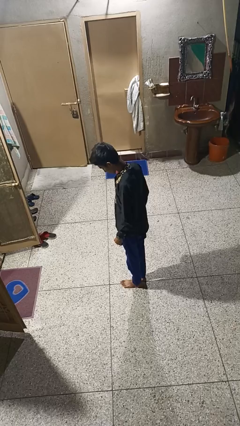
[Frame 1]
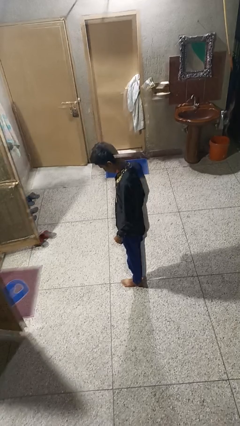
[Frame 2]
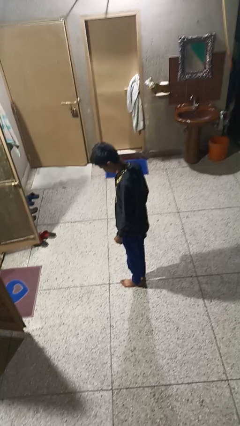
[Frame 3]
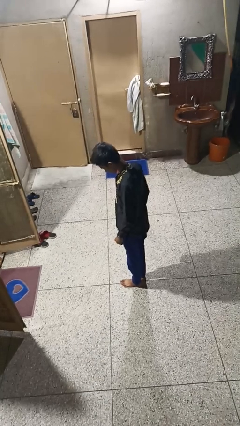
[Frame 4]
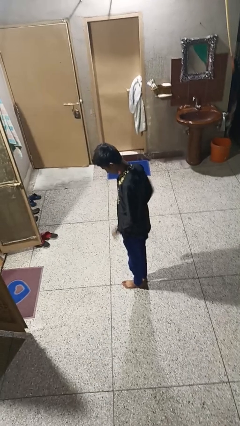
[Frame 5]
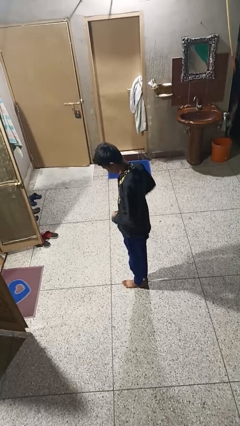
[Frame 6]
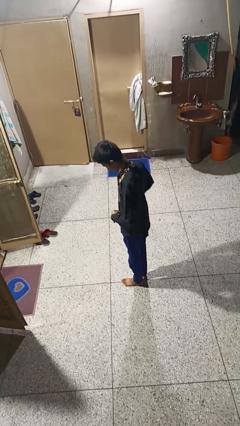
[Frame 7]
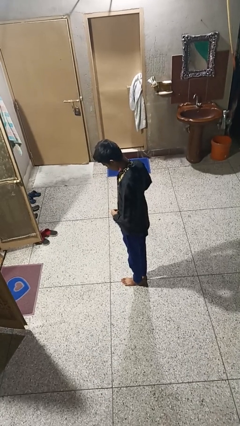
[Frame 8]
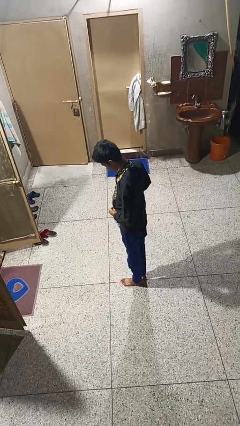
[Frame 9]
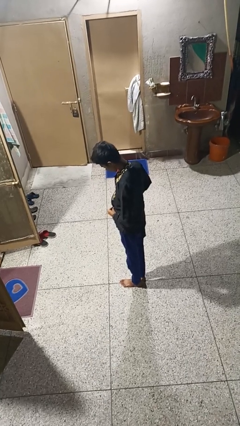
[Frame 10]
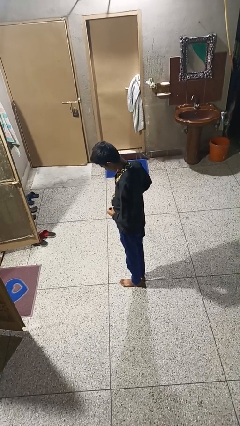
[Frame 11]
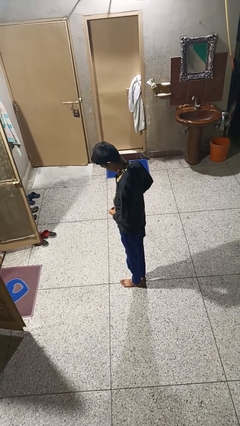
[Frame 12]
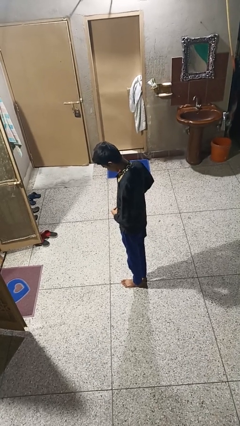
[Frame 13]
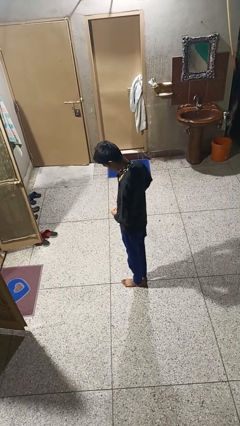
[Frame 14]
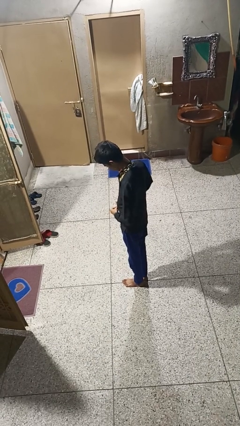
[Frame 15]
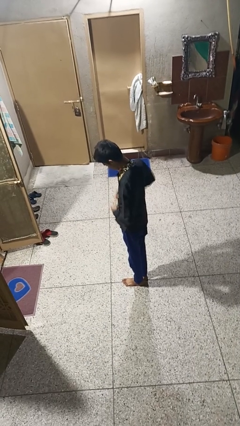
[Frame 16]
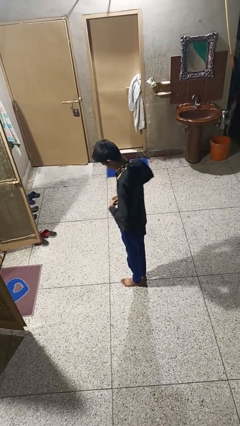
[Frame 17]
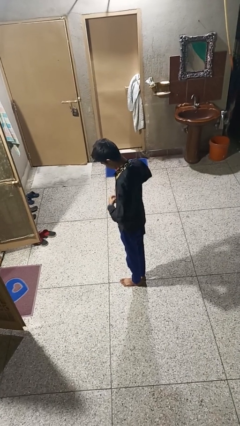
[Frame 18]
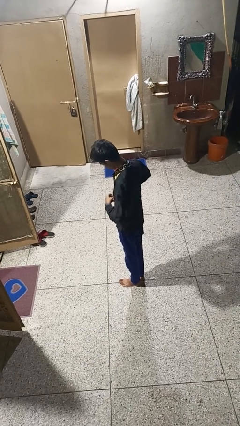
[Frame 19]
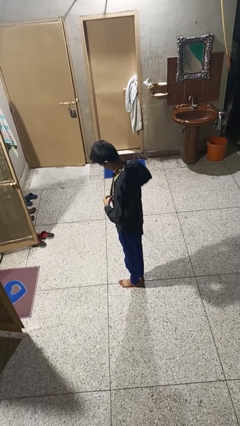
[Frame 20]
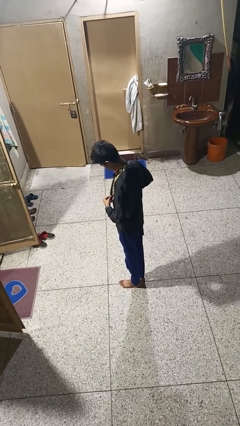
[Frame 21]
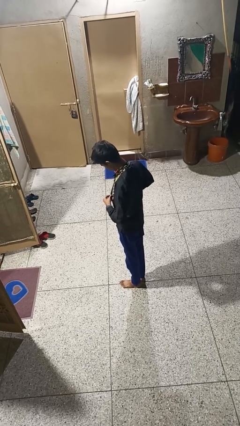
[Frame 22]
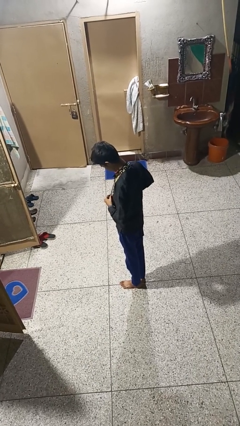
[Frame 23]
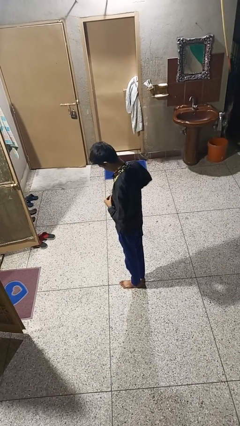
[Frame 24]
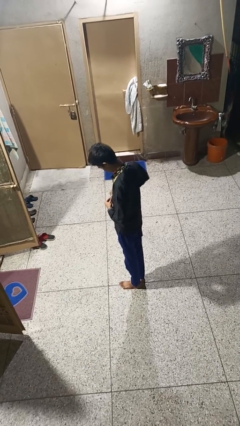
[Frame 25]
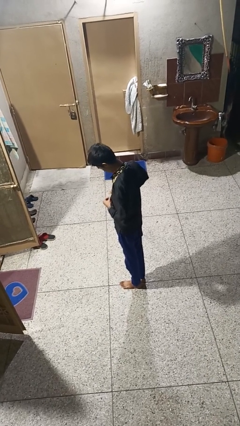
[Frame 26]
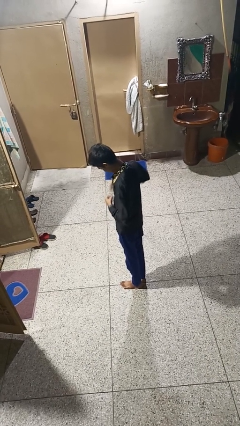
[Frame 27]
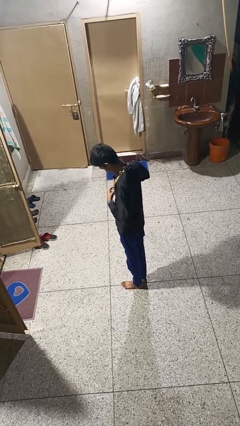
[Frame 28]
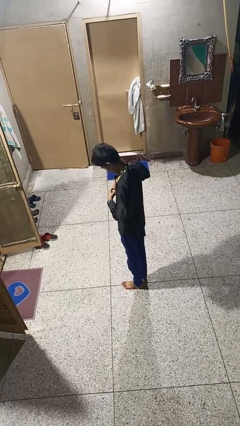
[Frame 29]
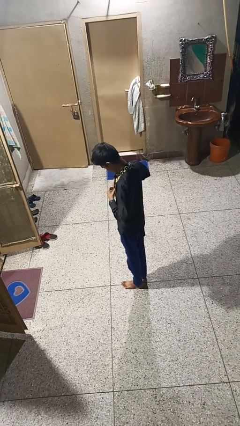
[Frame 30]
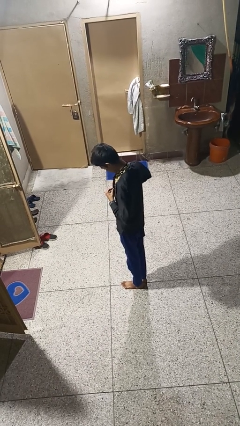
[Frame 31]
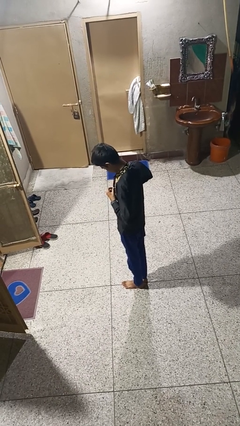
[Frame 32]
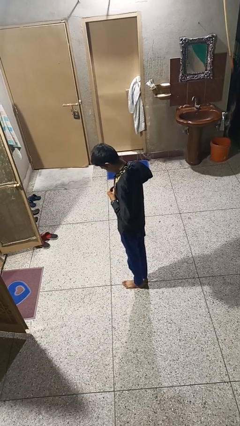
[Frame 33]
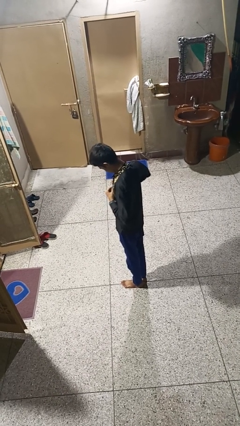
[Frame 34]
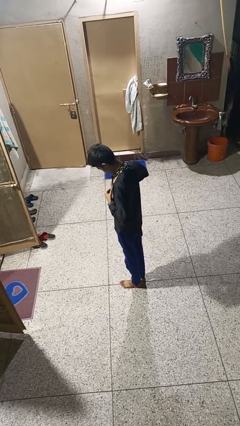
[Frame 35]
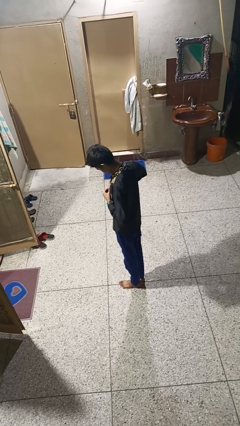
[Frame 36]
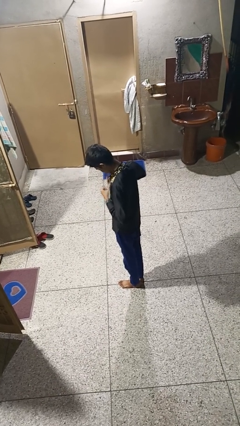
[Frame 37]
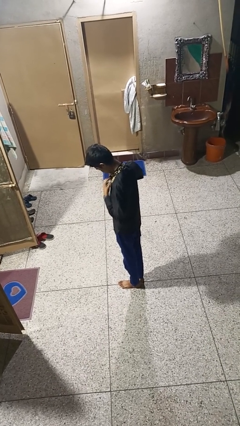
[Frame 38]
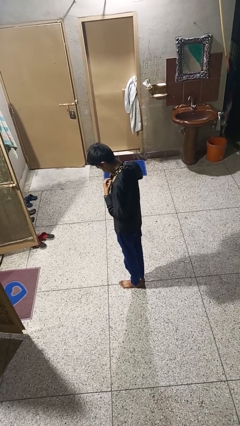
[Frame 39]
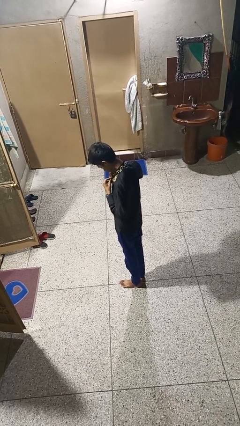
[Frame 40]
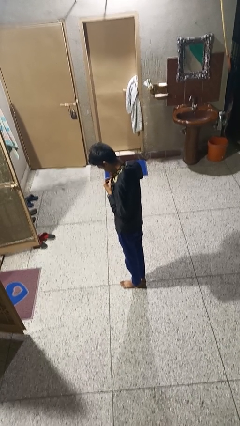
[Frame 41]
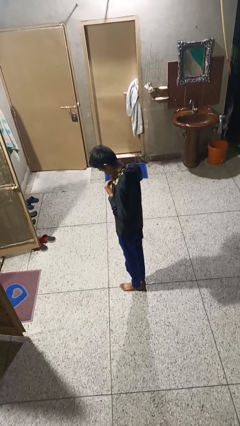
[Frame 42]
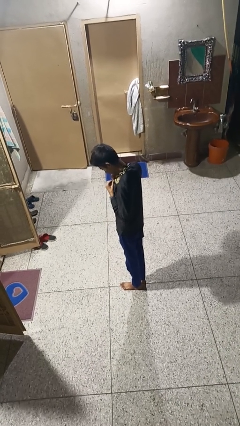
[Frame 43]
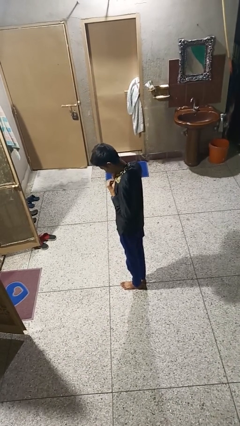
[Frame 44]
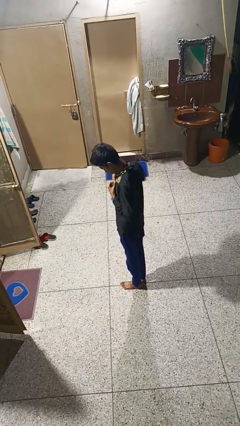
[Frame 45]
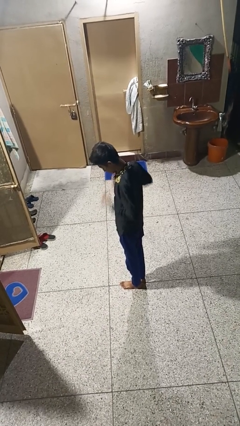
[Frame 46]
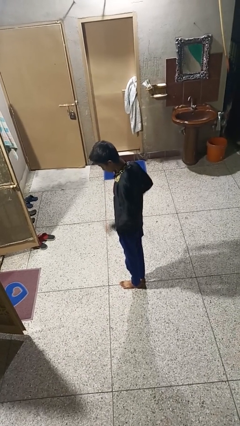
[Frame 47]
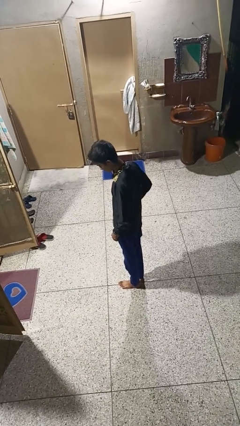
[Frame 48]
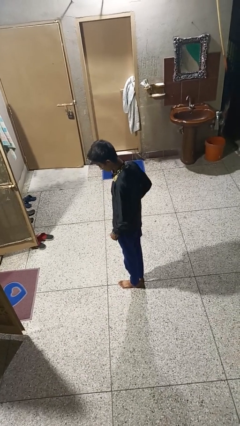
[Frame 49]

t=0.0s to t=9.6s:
person buttons shirt

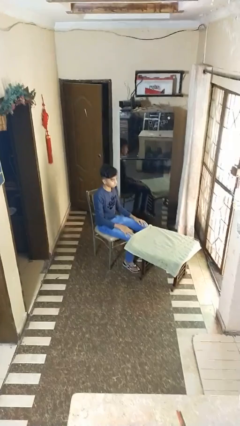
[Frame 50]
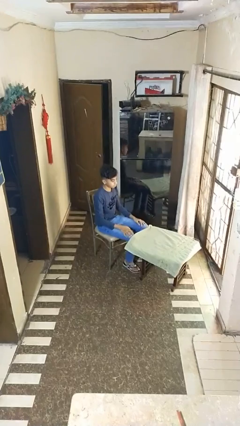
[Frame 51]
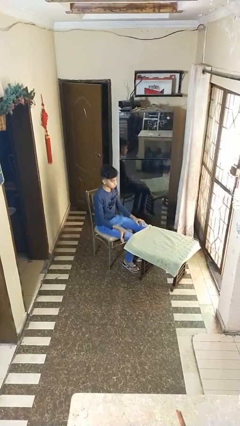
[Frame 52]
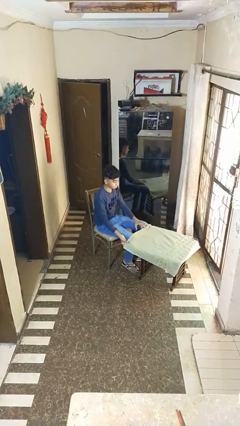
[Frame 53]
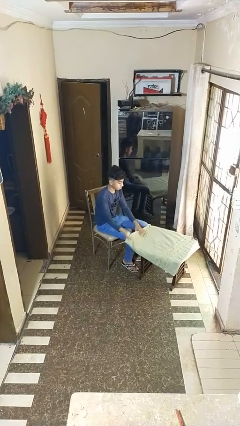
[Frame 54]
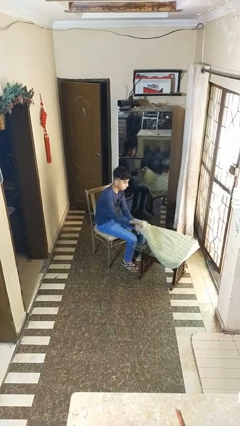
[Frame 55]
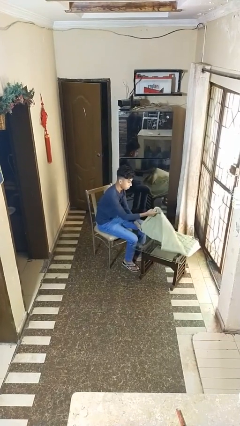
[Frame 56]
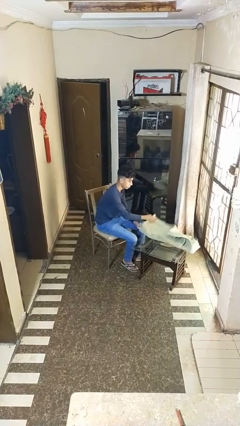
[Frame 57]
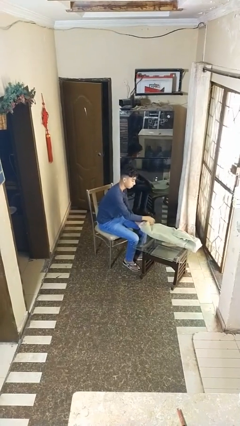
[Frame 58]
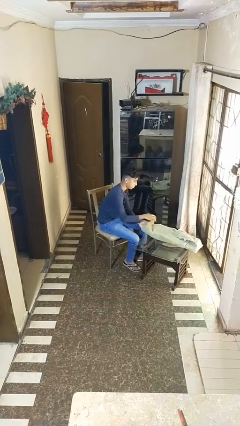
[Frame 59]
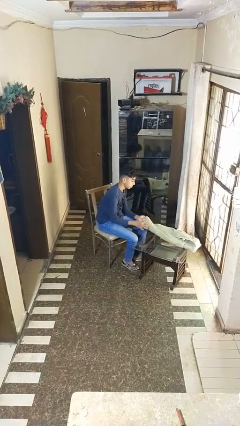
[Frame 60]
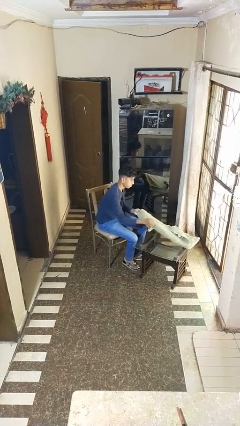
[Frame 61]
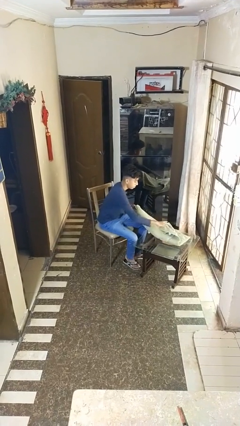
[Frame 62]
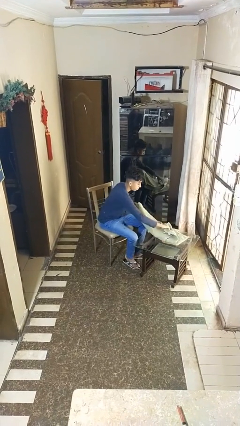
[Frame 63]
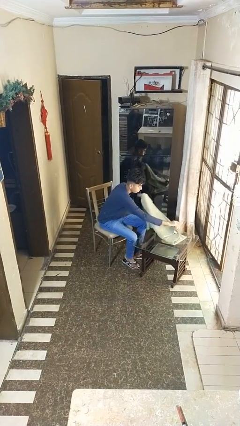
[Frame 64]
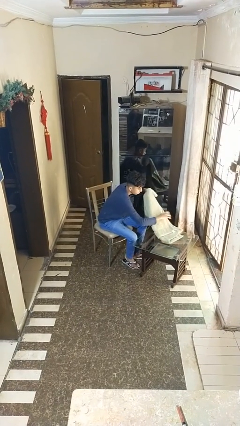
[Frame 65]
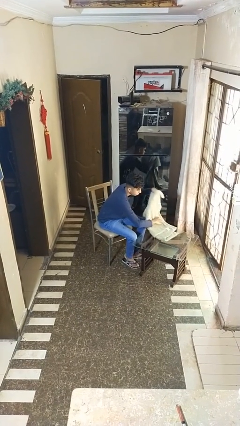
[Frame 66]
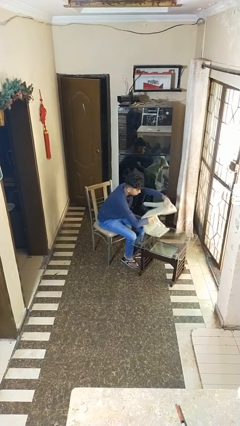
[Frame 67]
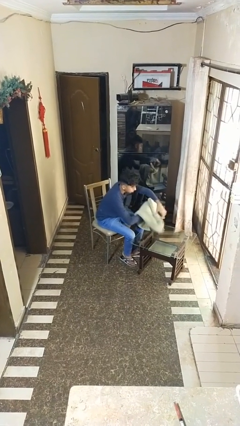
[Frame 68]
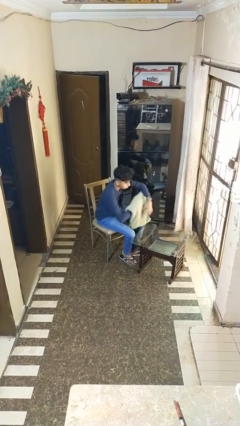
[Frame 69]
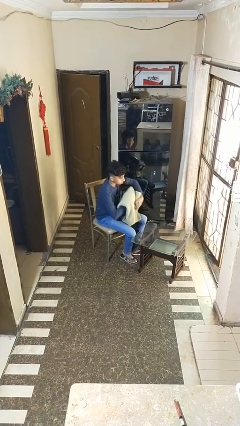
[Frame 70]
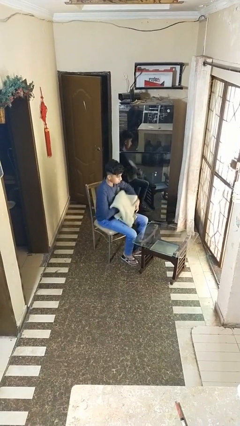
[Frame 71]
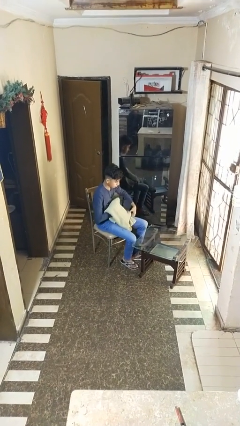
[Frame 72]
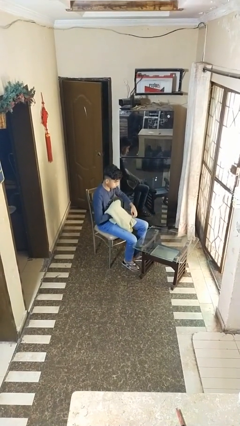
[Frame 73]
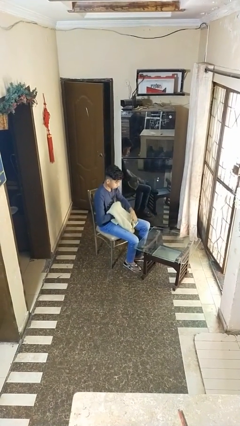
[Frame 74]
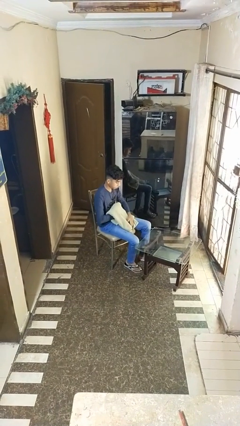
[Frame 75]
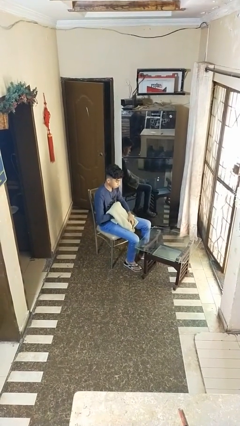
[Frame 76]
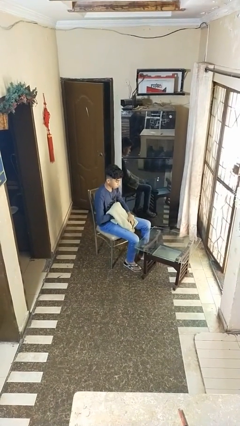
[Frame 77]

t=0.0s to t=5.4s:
person folds tablecloth

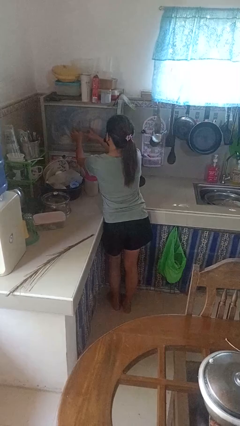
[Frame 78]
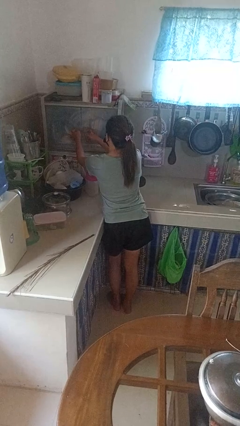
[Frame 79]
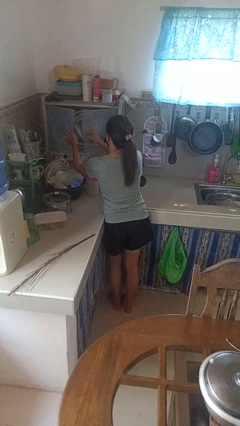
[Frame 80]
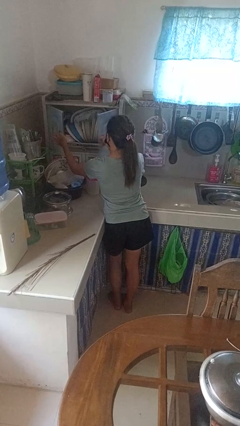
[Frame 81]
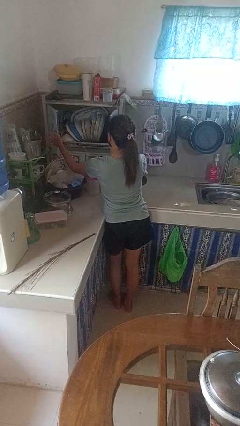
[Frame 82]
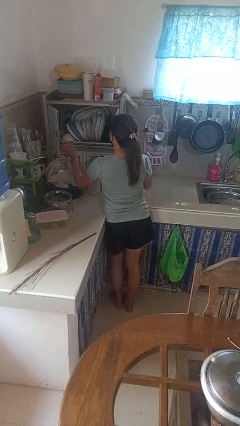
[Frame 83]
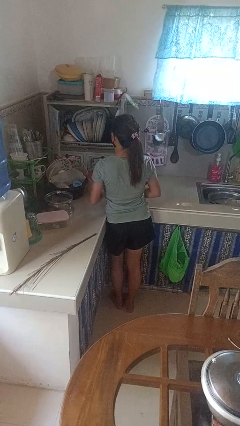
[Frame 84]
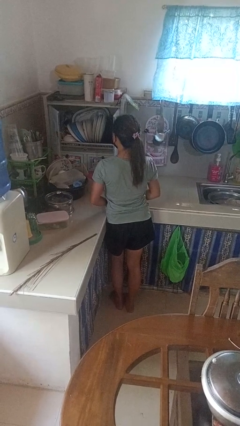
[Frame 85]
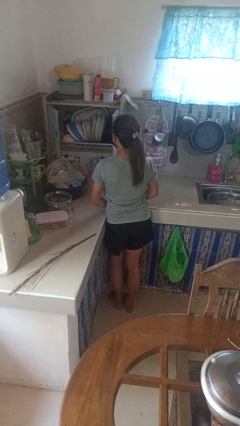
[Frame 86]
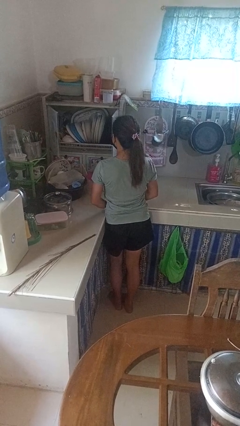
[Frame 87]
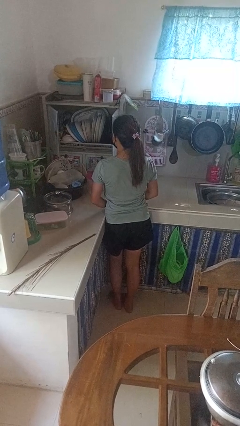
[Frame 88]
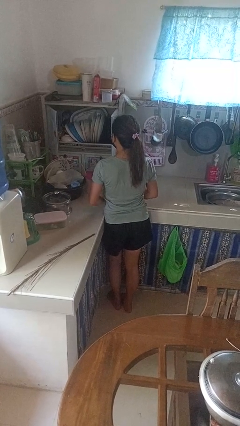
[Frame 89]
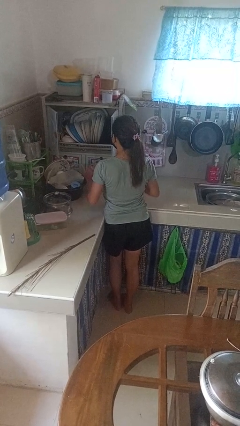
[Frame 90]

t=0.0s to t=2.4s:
person opens clothes washer

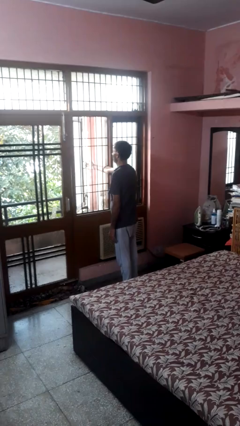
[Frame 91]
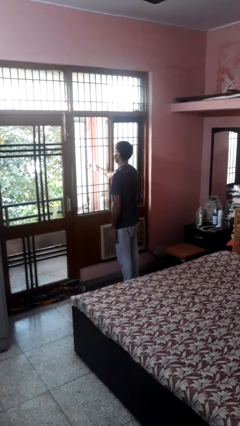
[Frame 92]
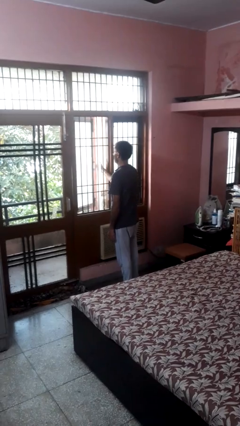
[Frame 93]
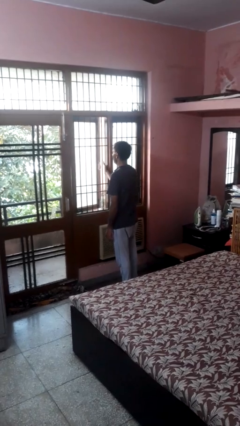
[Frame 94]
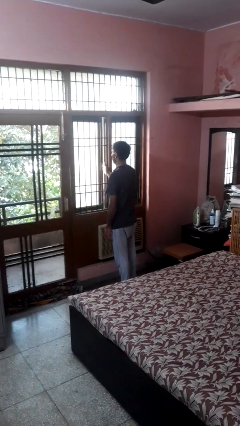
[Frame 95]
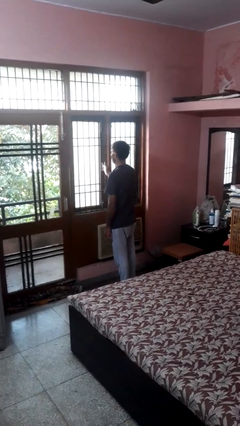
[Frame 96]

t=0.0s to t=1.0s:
person closes home window
